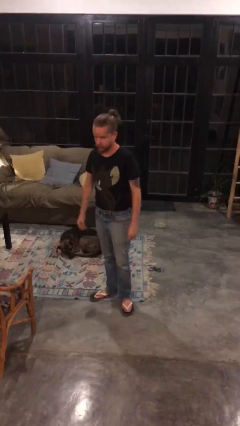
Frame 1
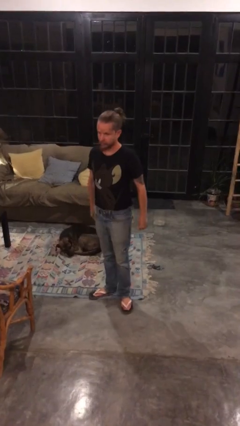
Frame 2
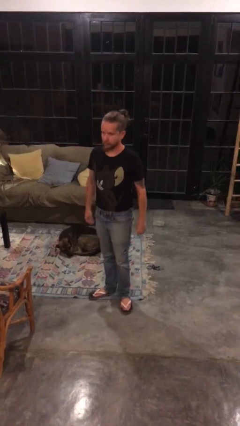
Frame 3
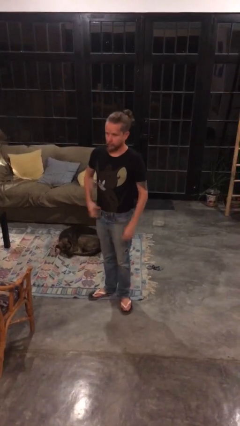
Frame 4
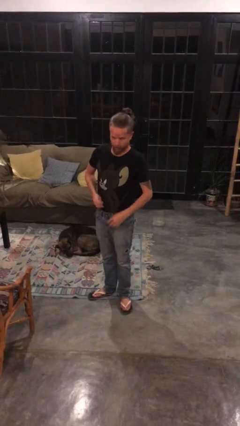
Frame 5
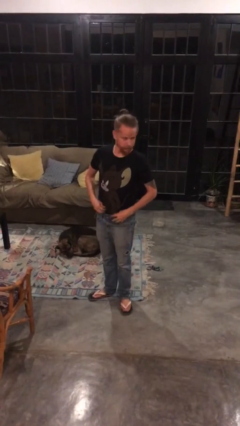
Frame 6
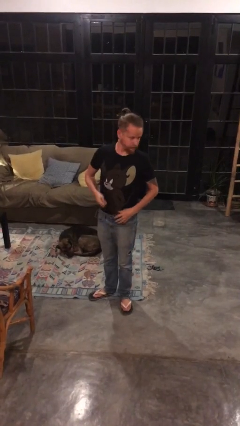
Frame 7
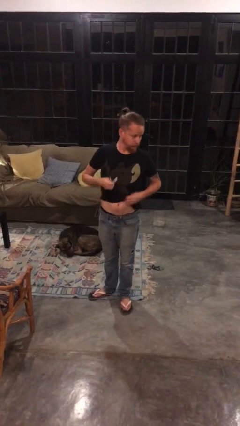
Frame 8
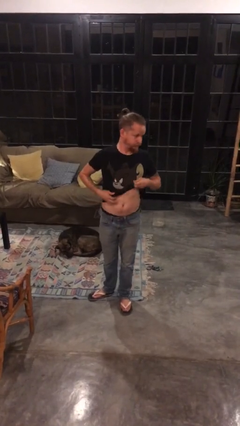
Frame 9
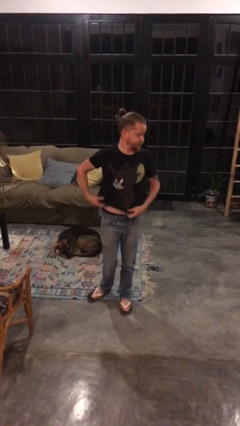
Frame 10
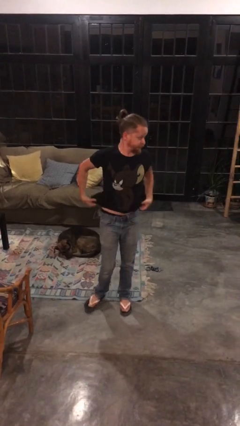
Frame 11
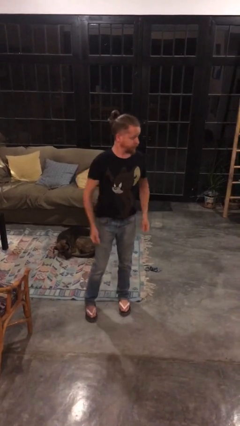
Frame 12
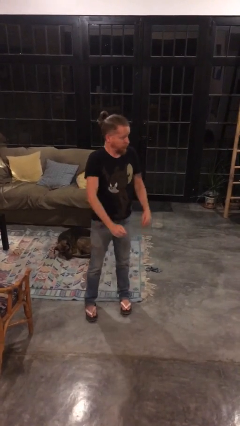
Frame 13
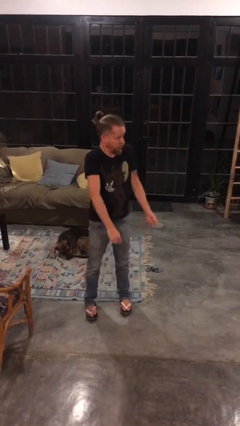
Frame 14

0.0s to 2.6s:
person untucks shirt

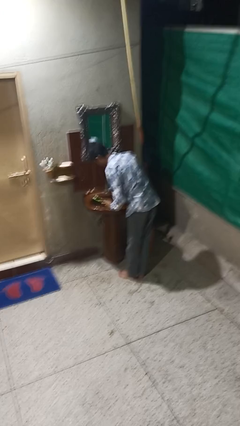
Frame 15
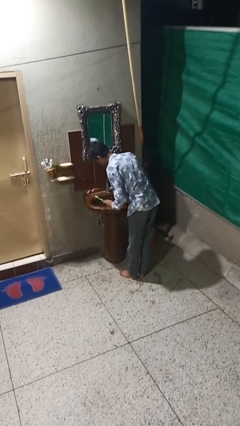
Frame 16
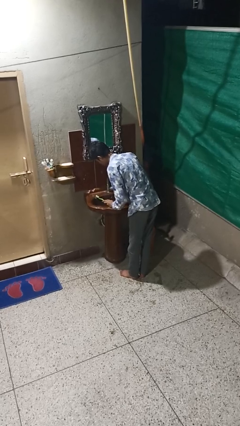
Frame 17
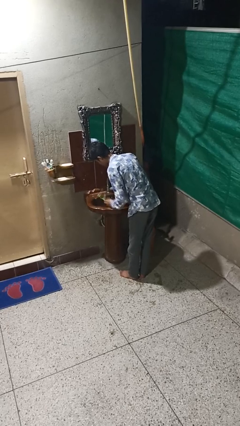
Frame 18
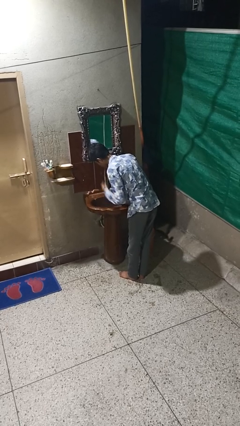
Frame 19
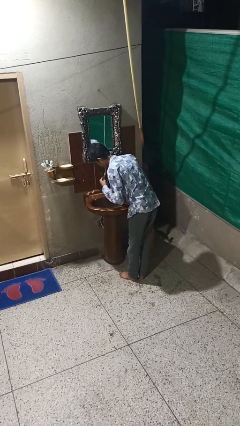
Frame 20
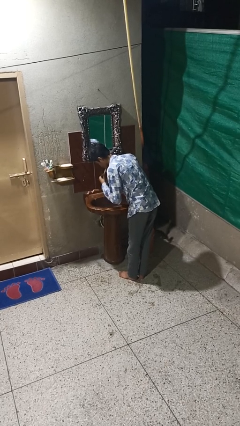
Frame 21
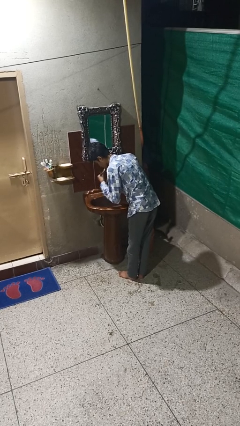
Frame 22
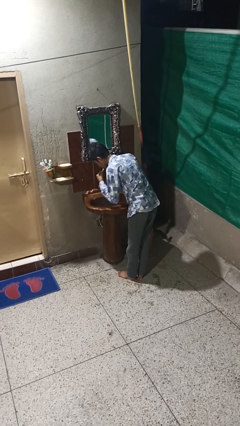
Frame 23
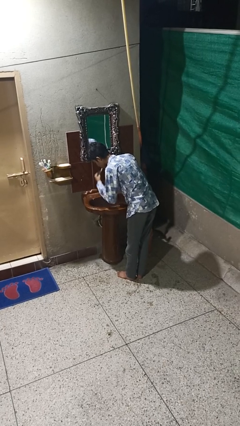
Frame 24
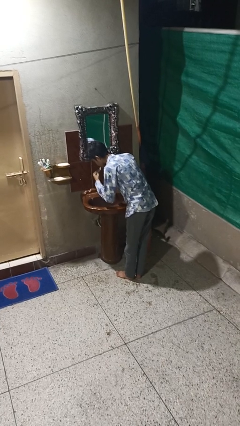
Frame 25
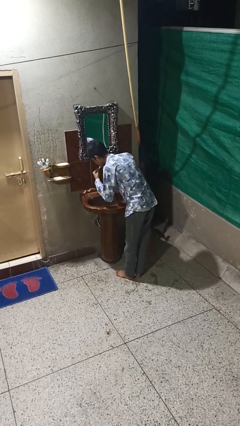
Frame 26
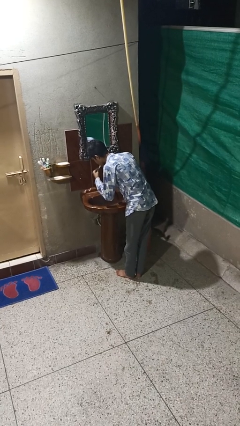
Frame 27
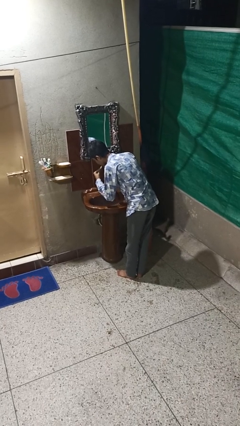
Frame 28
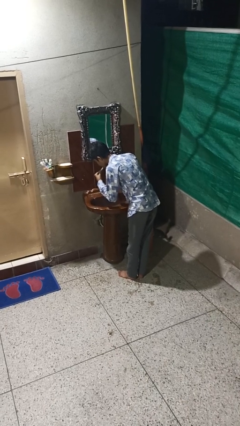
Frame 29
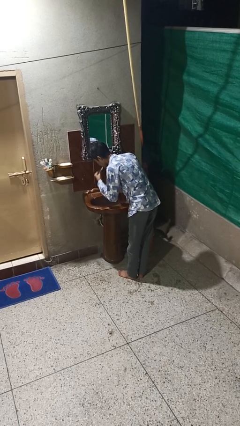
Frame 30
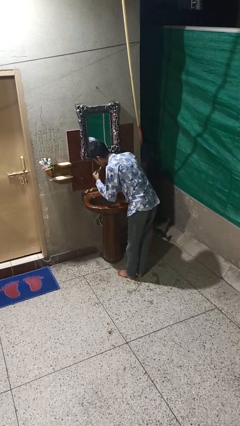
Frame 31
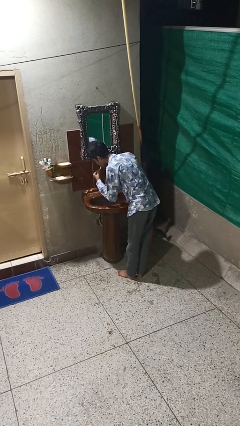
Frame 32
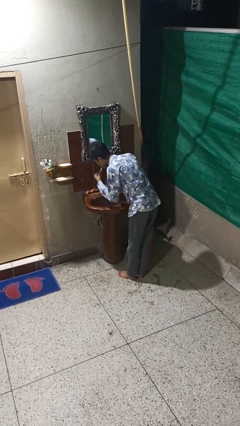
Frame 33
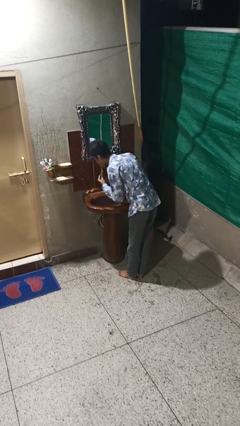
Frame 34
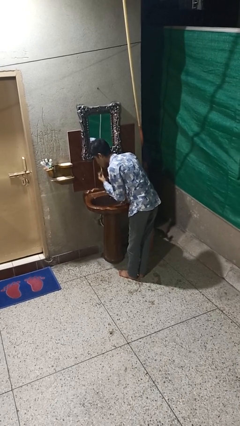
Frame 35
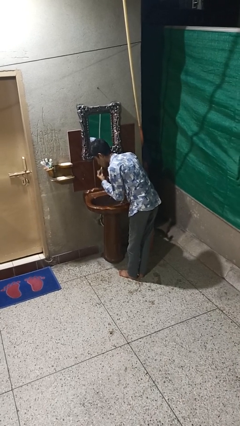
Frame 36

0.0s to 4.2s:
person brushes teeth

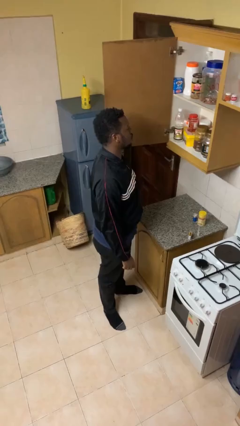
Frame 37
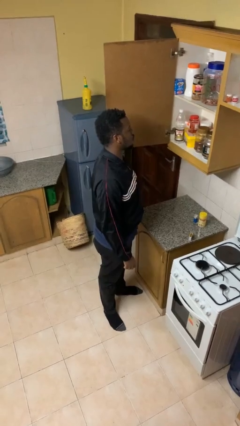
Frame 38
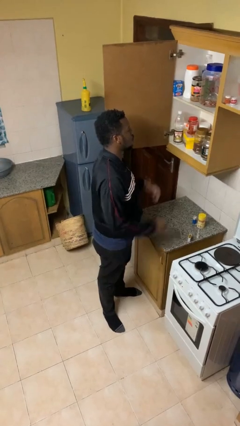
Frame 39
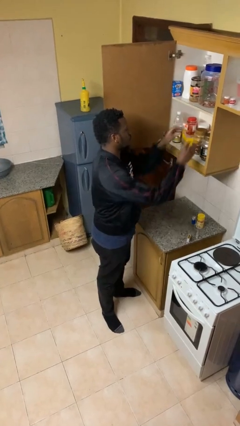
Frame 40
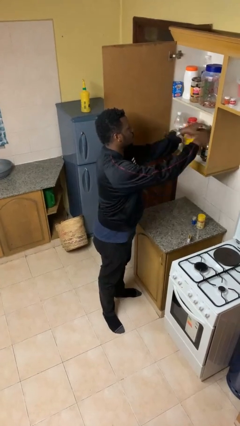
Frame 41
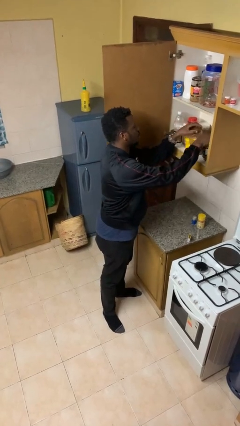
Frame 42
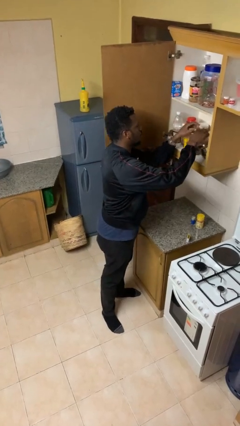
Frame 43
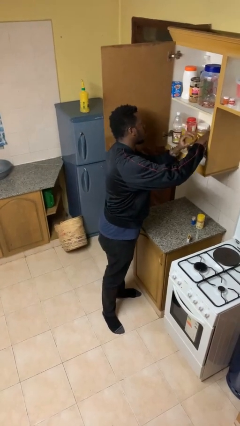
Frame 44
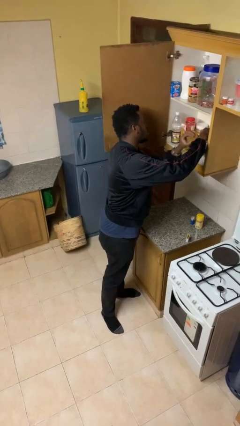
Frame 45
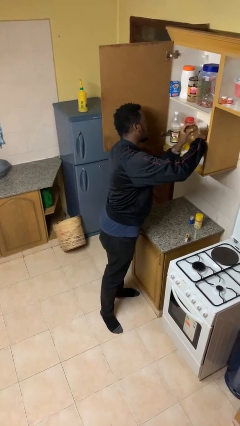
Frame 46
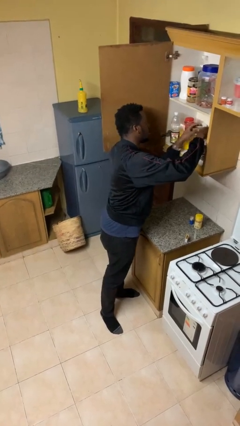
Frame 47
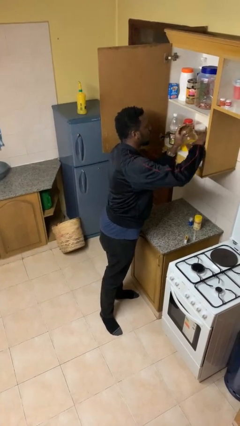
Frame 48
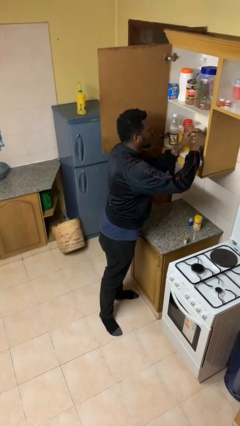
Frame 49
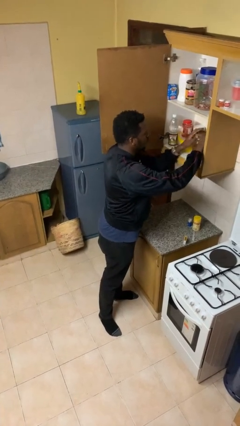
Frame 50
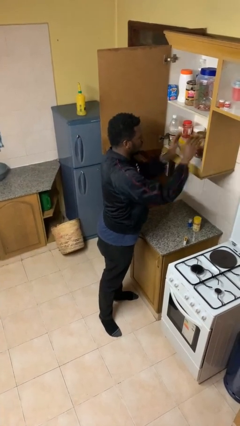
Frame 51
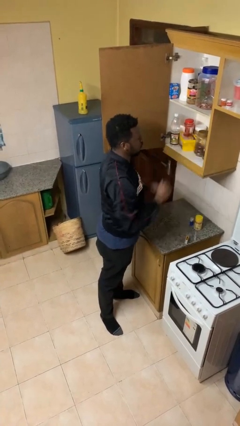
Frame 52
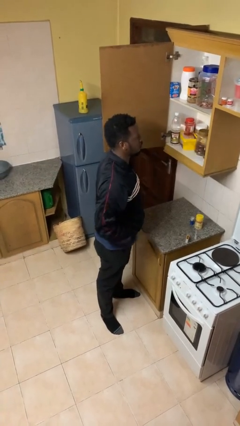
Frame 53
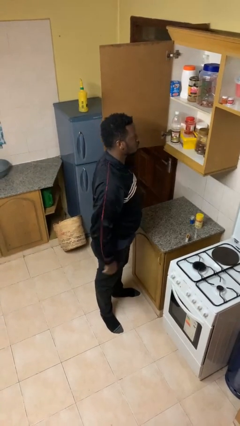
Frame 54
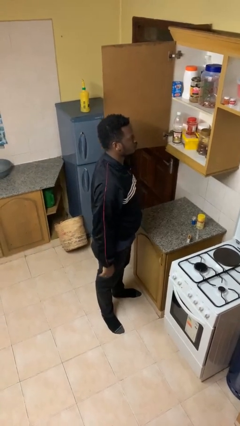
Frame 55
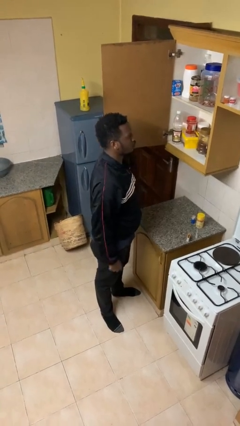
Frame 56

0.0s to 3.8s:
person searches in cabinet

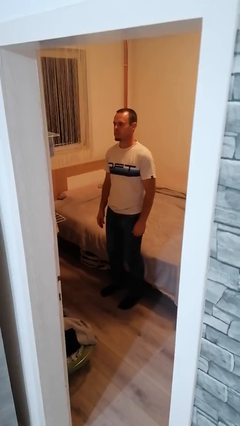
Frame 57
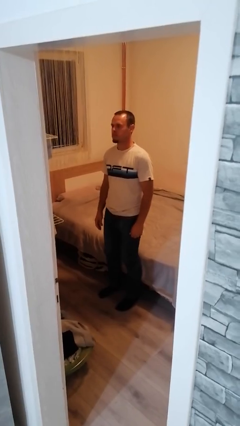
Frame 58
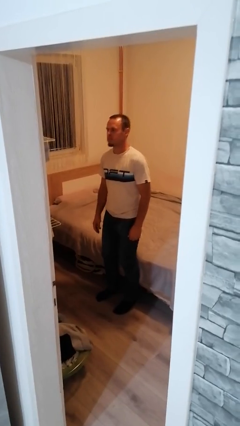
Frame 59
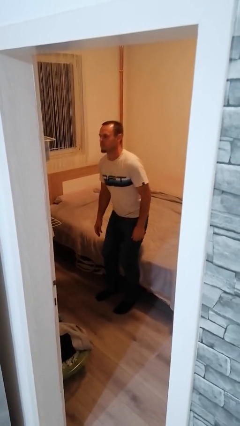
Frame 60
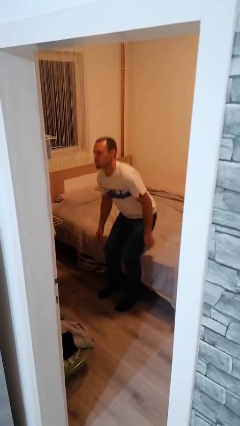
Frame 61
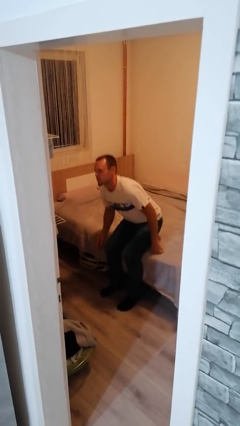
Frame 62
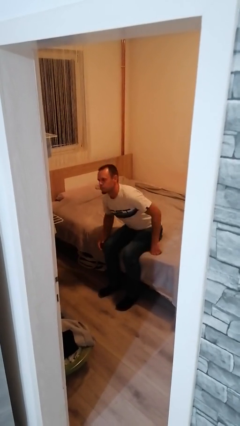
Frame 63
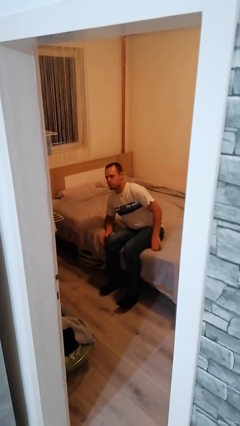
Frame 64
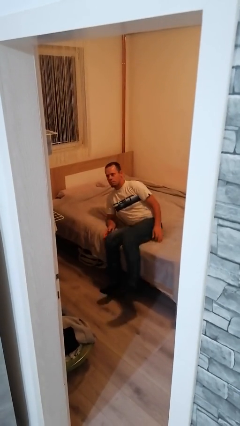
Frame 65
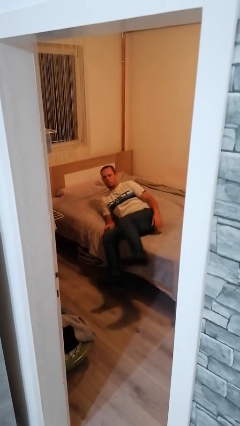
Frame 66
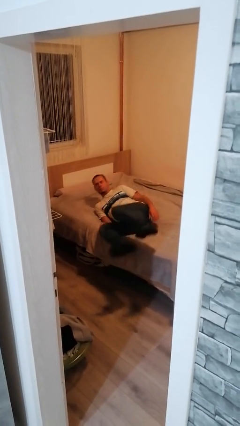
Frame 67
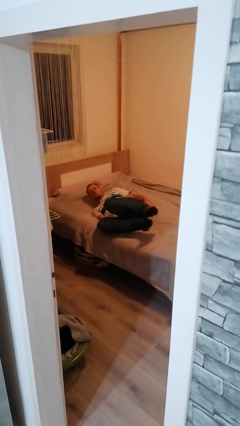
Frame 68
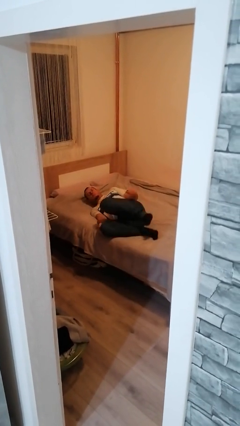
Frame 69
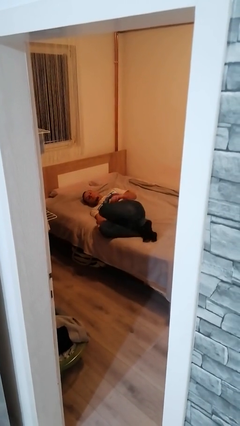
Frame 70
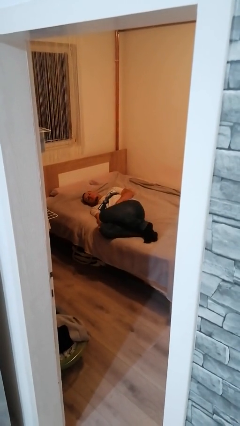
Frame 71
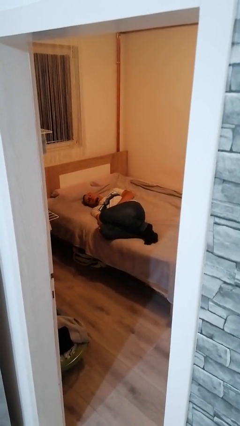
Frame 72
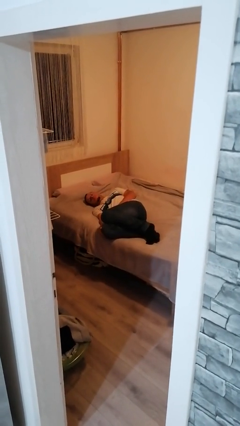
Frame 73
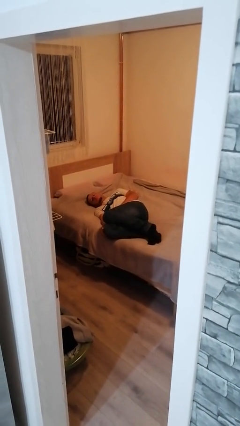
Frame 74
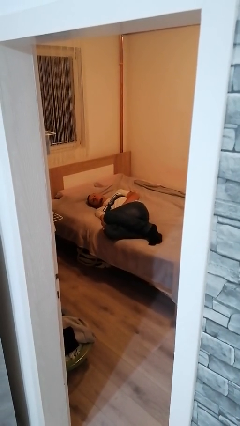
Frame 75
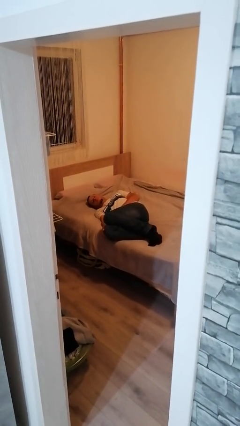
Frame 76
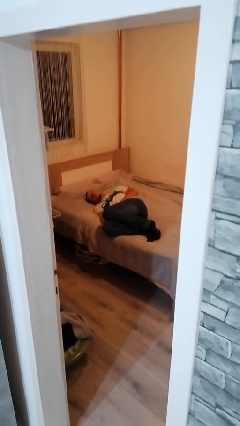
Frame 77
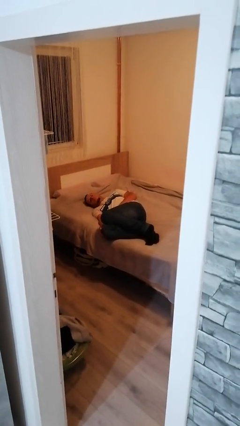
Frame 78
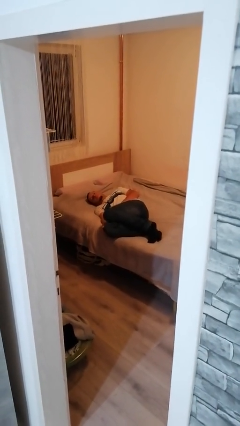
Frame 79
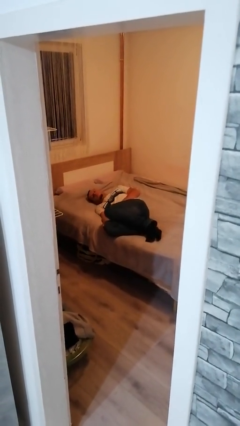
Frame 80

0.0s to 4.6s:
person lies down on bed

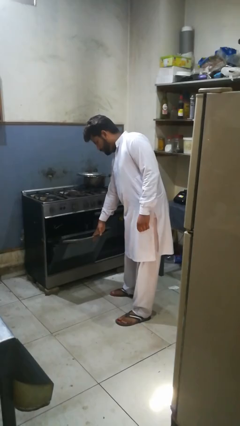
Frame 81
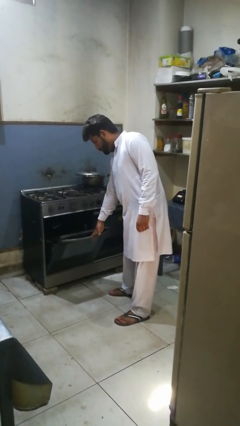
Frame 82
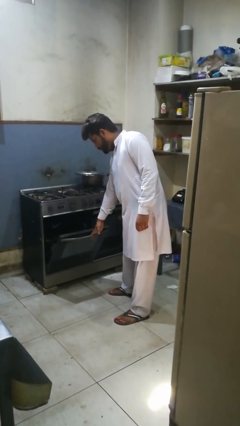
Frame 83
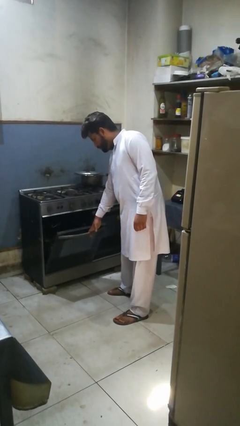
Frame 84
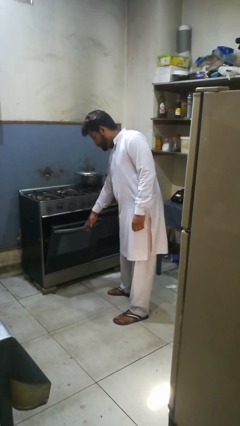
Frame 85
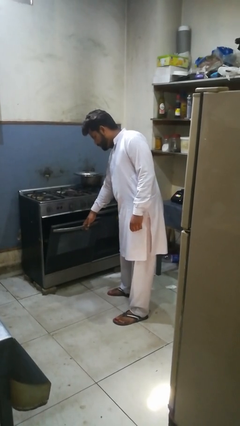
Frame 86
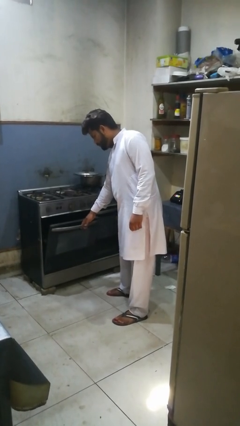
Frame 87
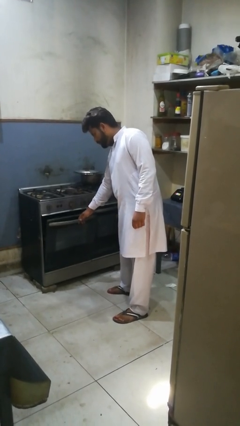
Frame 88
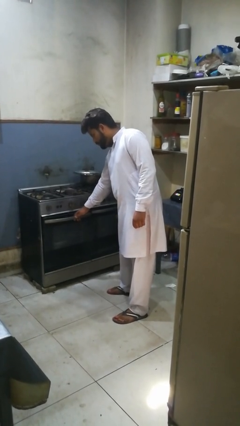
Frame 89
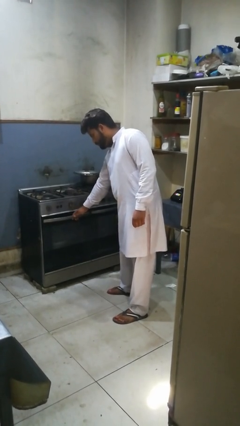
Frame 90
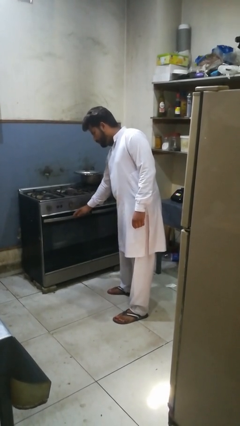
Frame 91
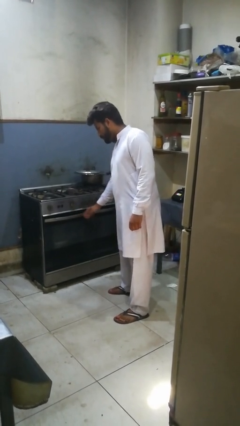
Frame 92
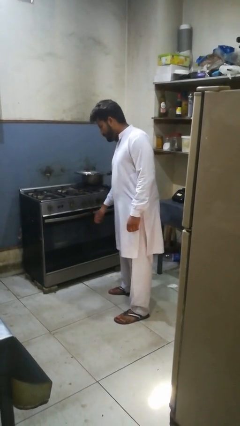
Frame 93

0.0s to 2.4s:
person closes oven door
